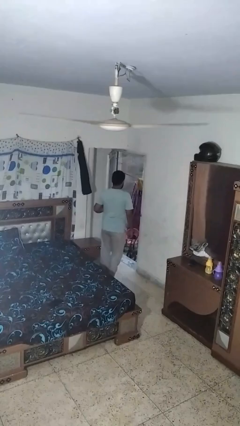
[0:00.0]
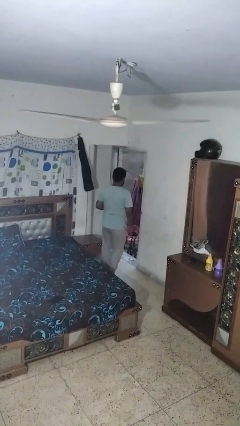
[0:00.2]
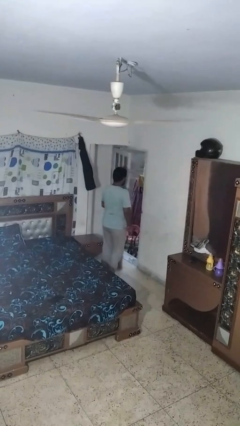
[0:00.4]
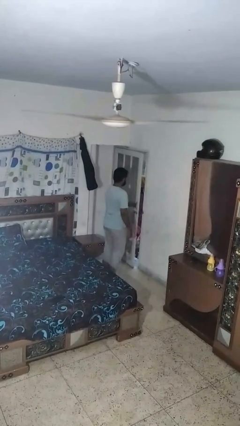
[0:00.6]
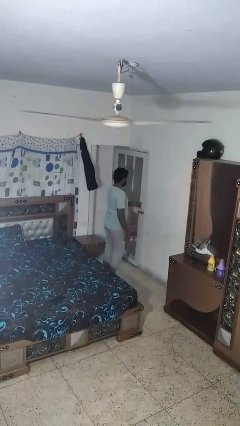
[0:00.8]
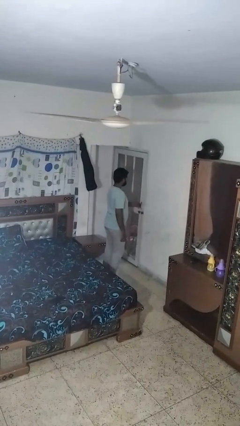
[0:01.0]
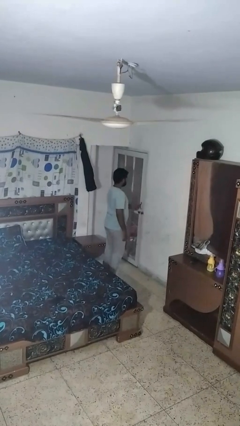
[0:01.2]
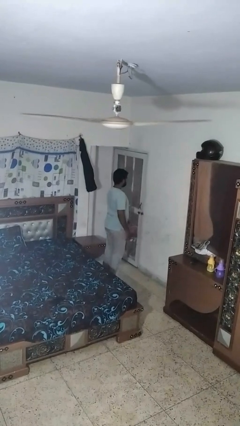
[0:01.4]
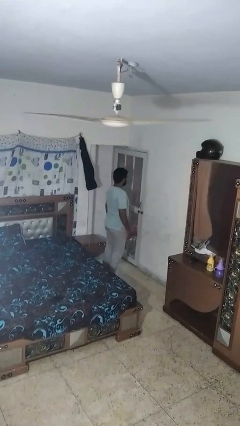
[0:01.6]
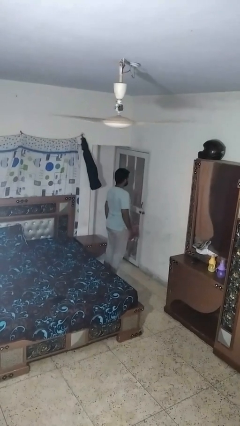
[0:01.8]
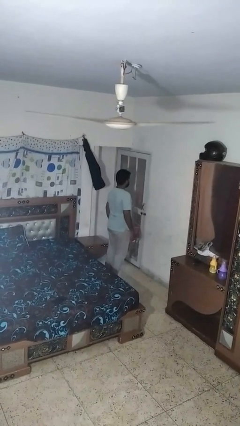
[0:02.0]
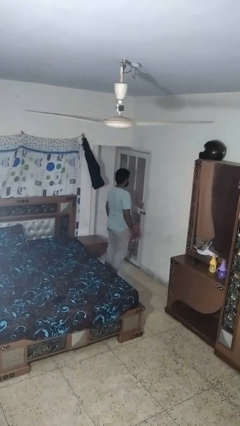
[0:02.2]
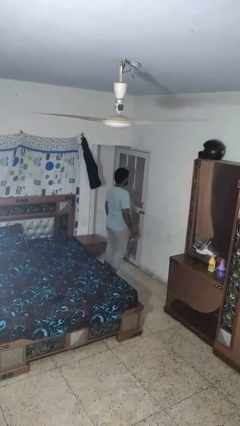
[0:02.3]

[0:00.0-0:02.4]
person closes gate

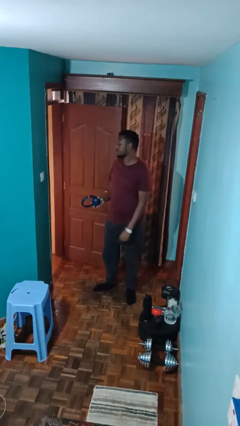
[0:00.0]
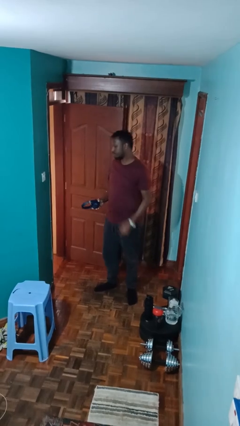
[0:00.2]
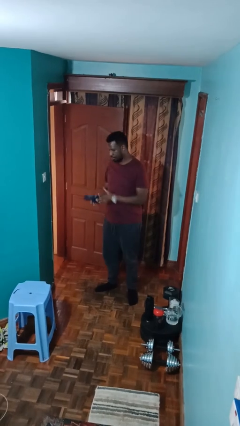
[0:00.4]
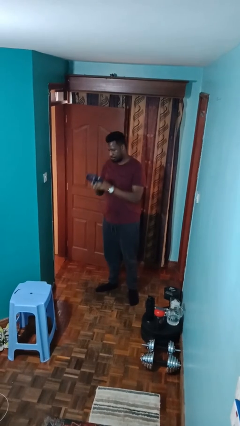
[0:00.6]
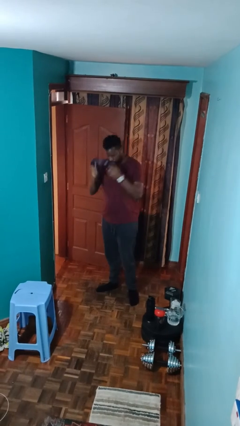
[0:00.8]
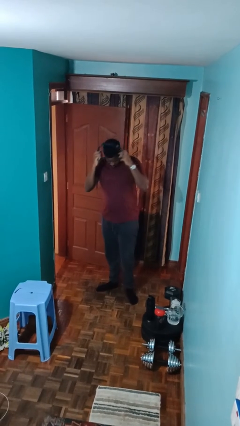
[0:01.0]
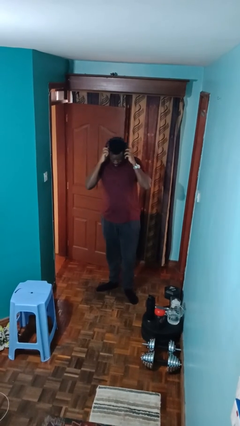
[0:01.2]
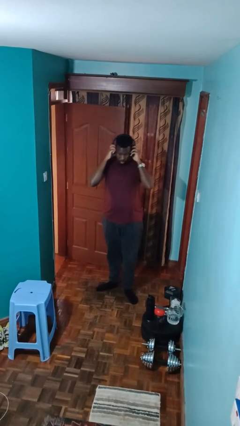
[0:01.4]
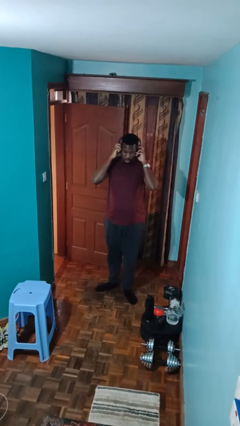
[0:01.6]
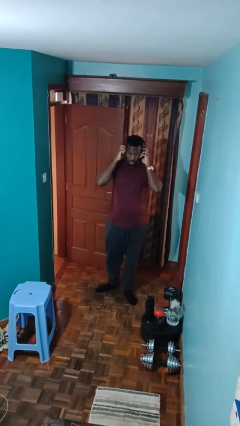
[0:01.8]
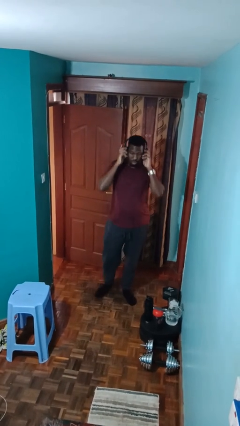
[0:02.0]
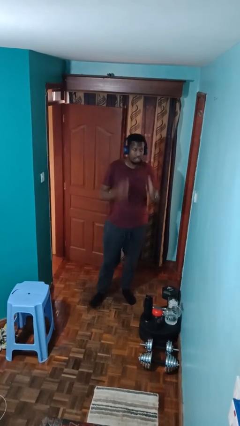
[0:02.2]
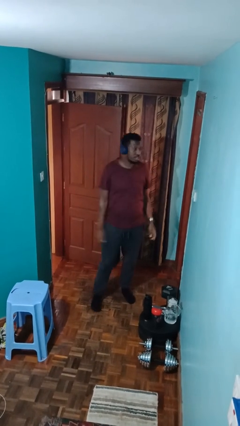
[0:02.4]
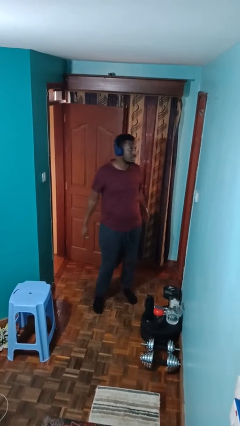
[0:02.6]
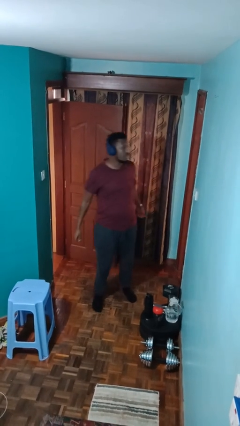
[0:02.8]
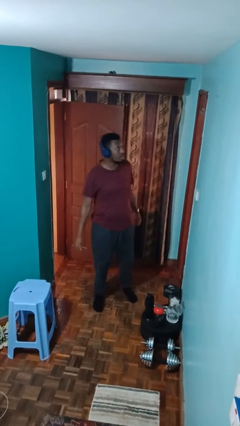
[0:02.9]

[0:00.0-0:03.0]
person puts on headphones

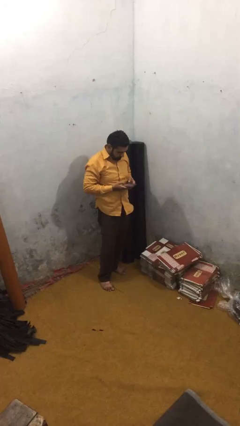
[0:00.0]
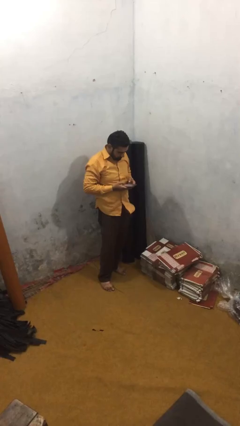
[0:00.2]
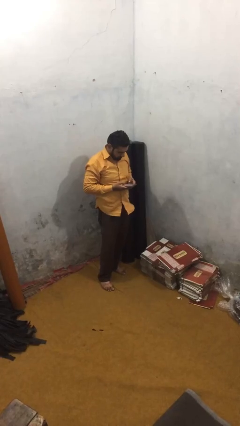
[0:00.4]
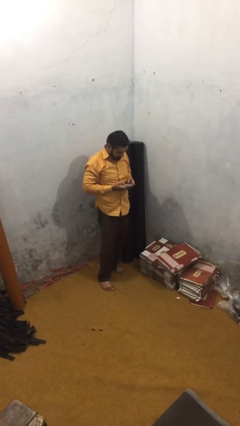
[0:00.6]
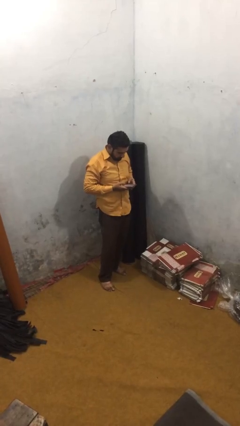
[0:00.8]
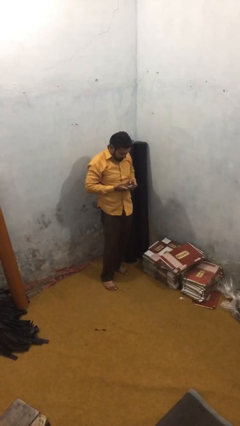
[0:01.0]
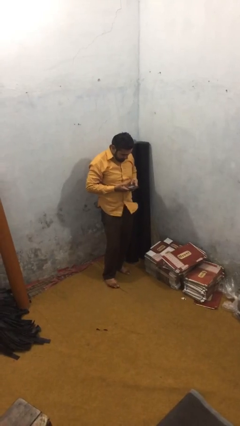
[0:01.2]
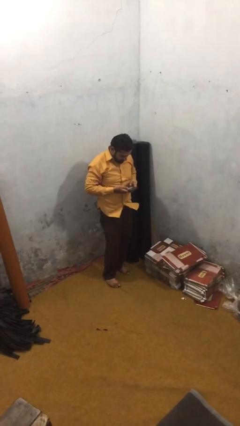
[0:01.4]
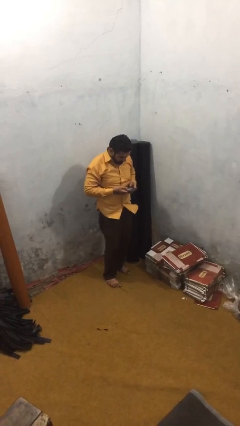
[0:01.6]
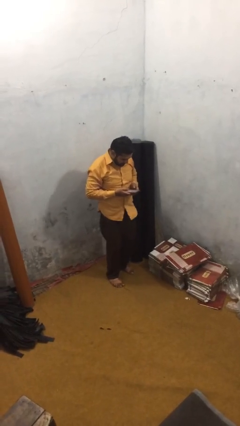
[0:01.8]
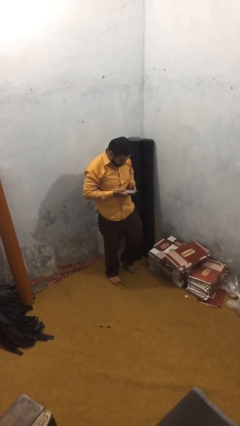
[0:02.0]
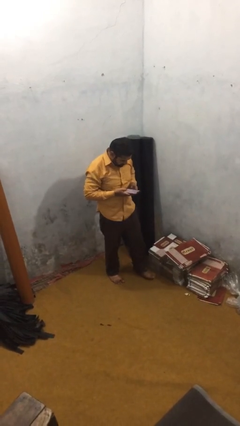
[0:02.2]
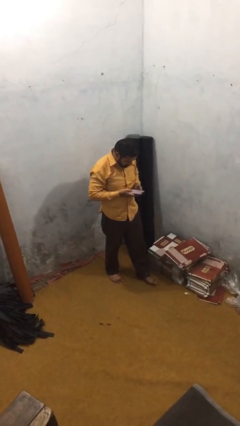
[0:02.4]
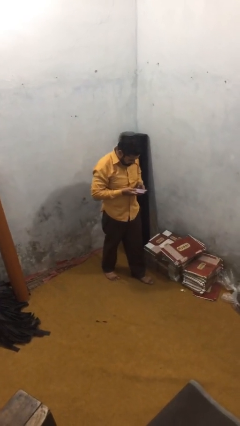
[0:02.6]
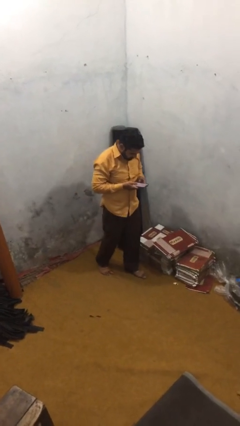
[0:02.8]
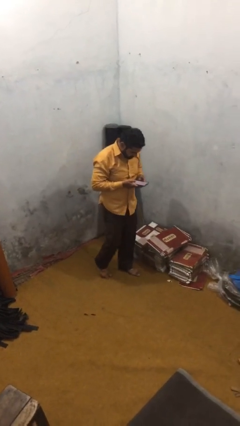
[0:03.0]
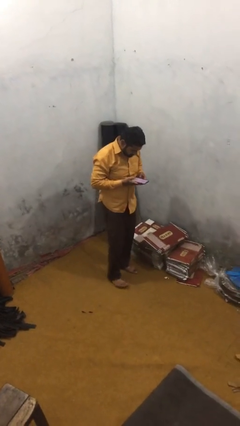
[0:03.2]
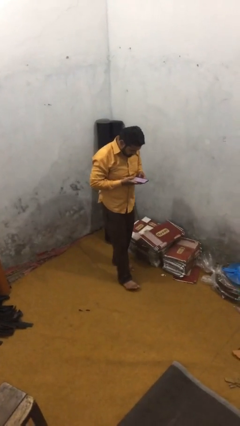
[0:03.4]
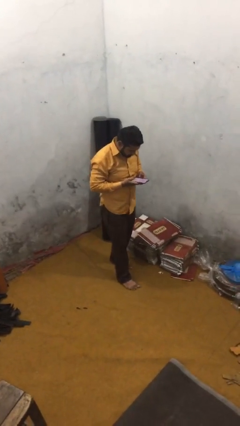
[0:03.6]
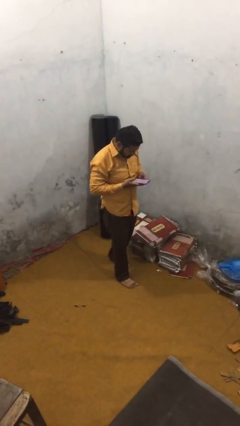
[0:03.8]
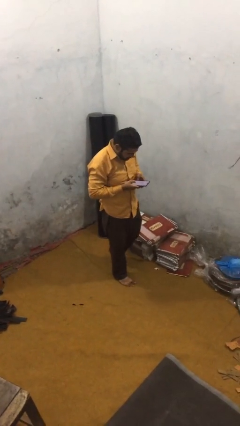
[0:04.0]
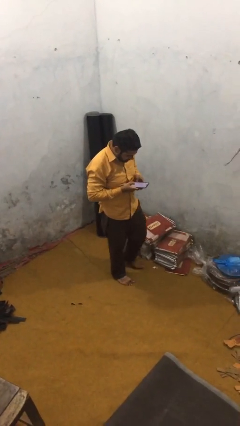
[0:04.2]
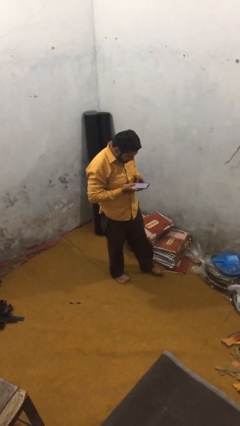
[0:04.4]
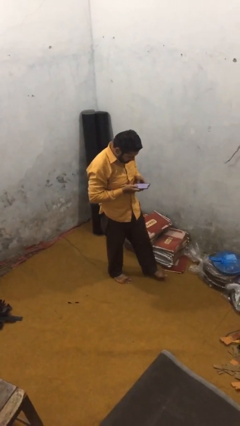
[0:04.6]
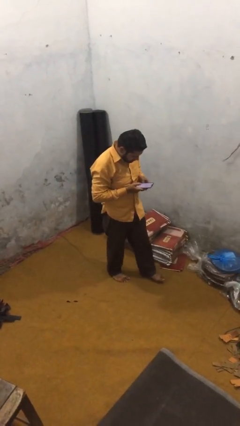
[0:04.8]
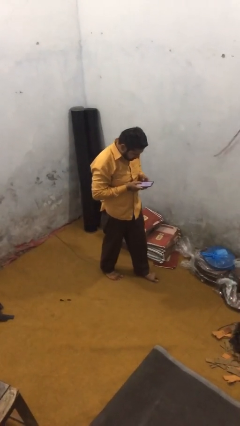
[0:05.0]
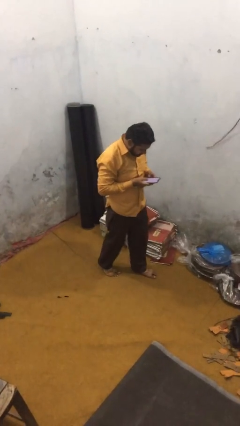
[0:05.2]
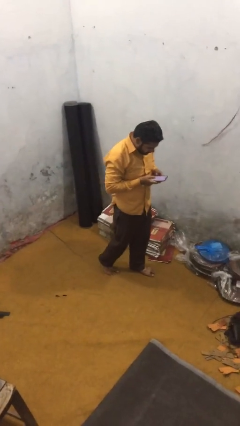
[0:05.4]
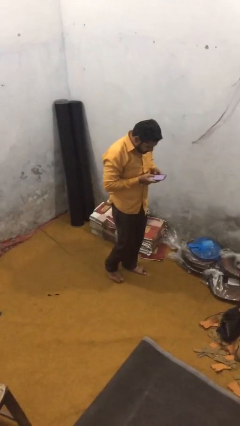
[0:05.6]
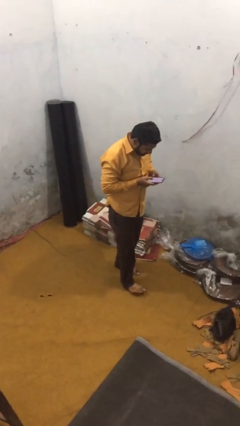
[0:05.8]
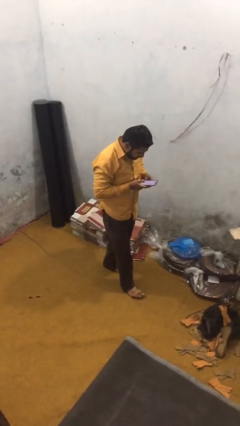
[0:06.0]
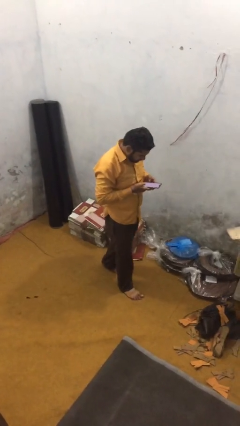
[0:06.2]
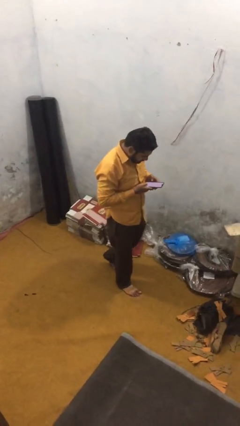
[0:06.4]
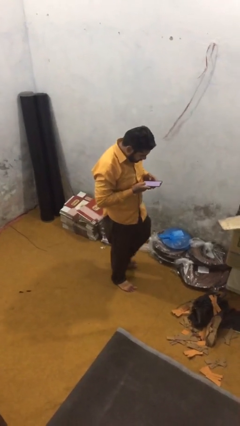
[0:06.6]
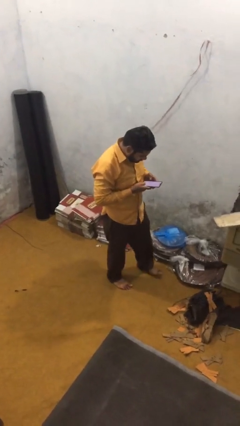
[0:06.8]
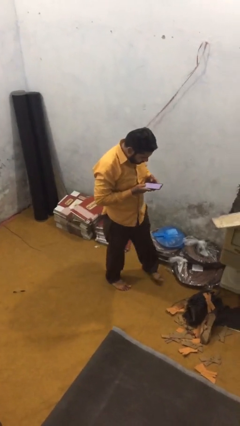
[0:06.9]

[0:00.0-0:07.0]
person texts on phone

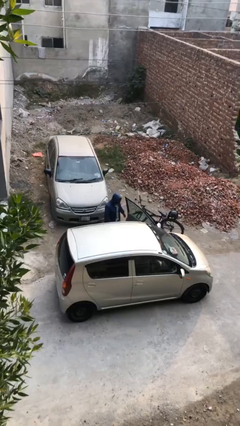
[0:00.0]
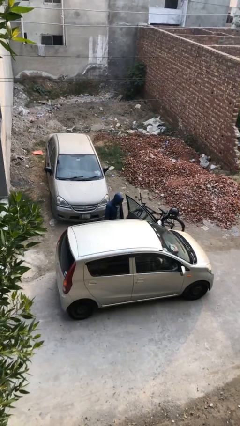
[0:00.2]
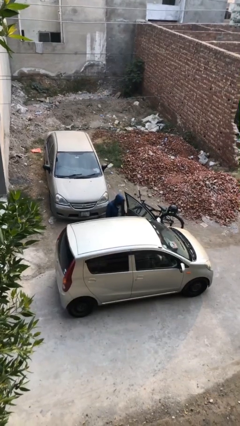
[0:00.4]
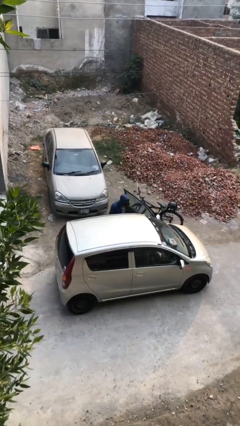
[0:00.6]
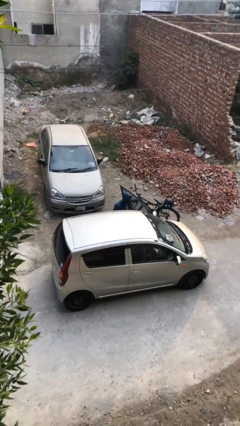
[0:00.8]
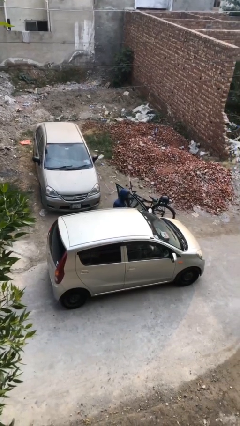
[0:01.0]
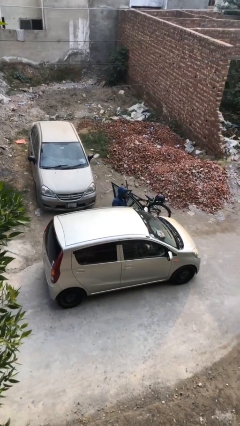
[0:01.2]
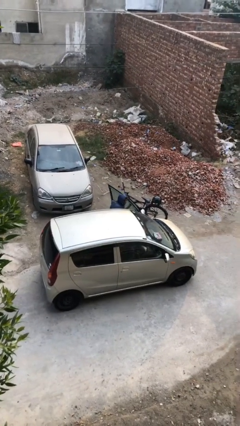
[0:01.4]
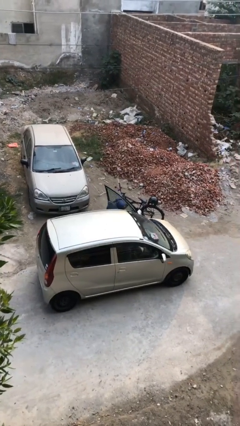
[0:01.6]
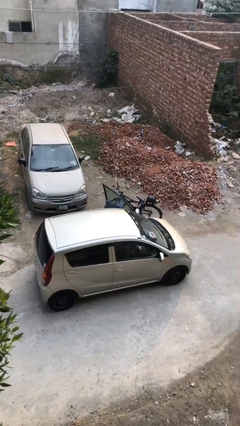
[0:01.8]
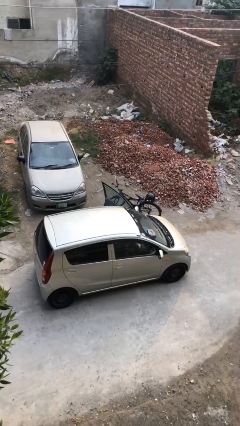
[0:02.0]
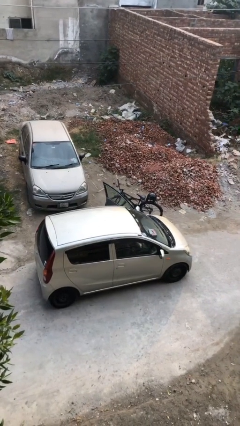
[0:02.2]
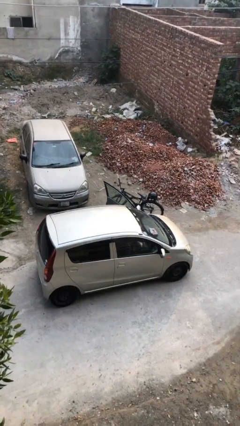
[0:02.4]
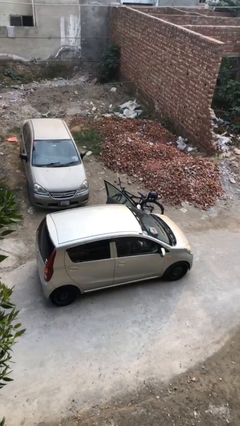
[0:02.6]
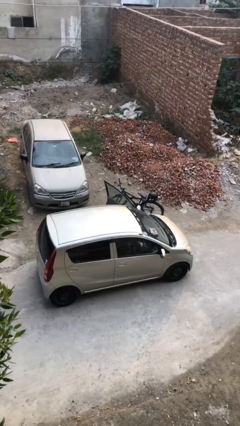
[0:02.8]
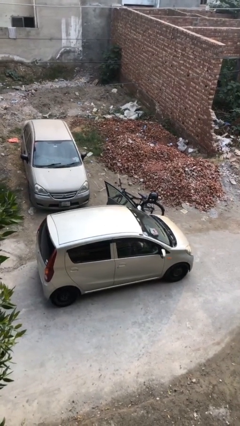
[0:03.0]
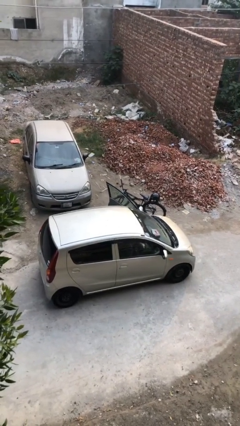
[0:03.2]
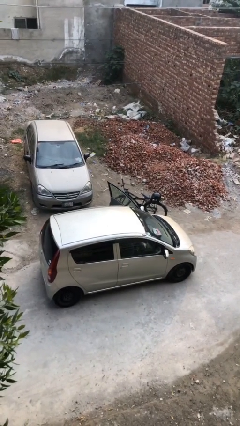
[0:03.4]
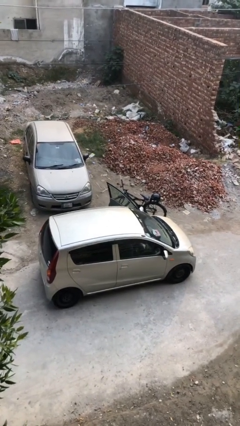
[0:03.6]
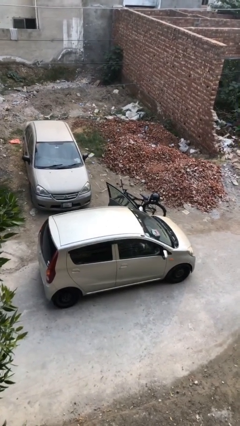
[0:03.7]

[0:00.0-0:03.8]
person enters car

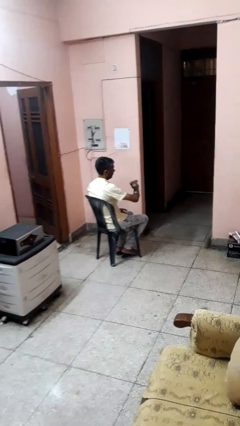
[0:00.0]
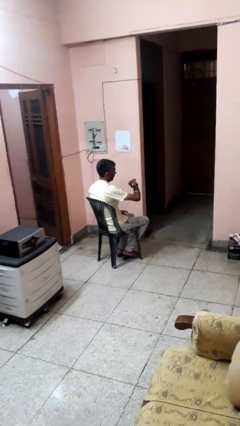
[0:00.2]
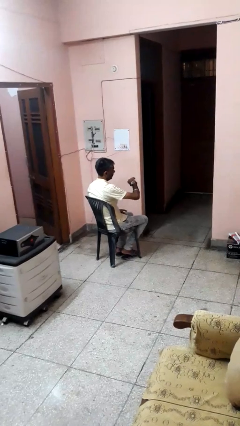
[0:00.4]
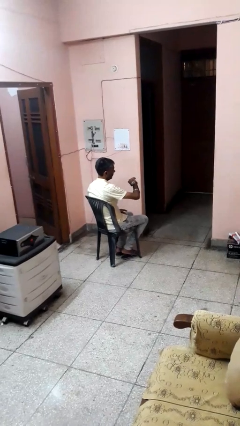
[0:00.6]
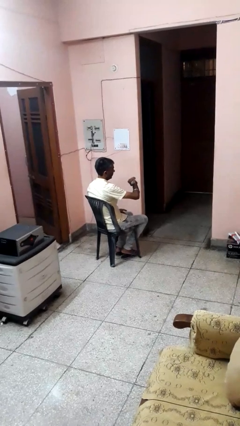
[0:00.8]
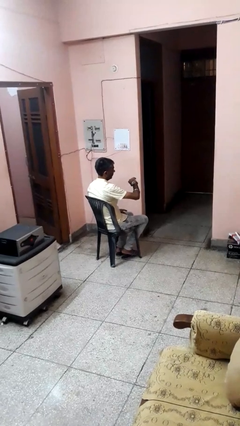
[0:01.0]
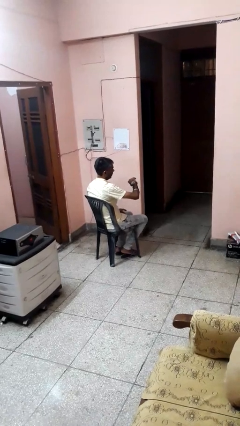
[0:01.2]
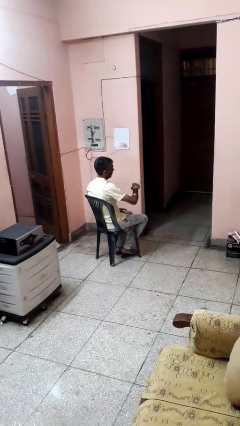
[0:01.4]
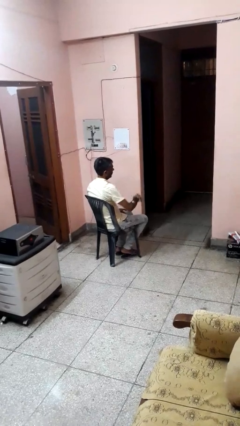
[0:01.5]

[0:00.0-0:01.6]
person looks at wristwatch
